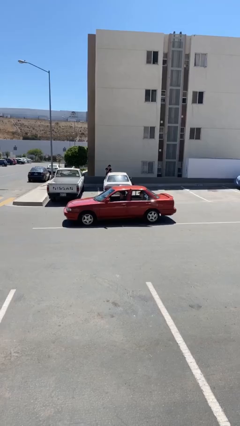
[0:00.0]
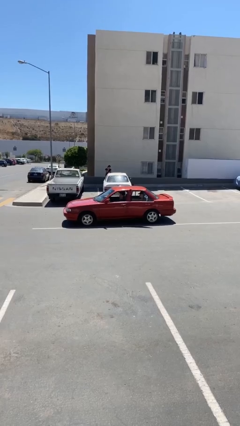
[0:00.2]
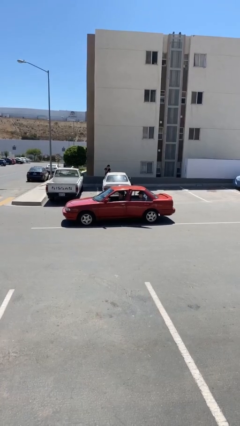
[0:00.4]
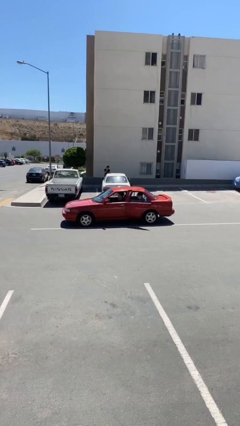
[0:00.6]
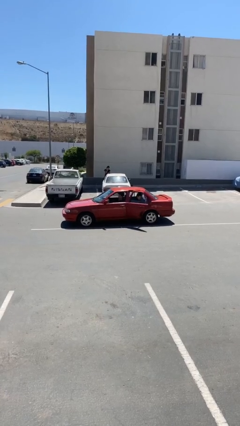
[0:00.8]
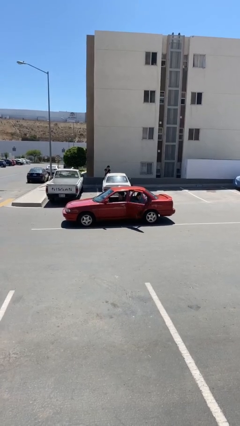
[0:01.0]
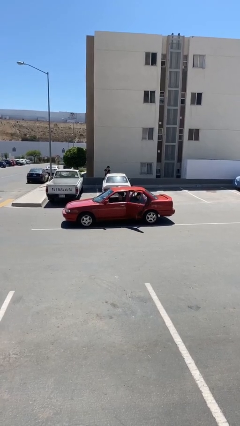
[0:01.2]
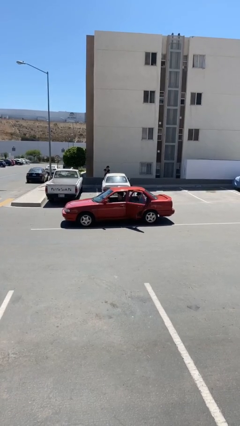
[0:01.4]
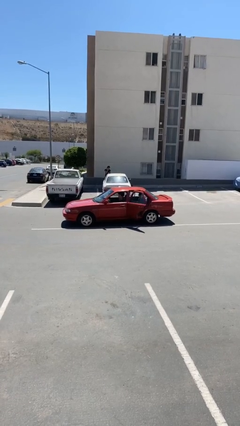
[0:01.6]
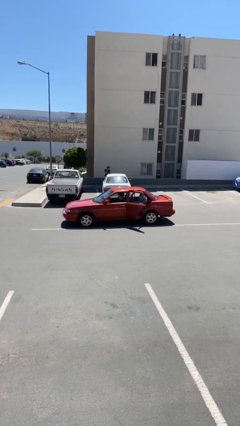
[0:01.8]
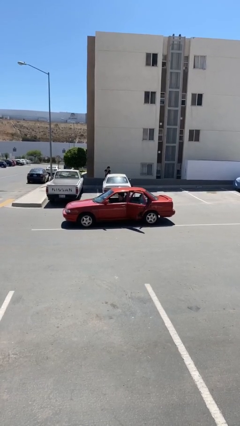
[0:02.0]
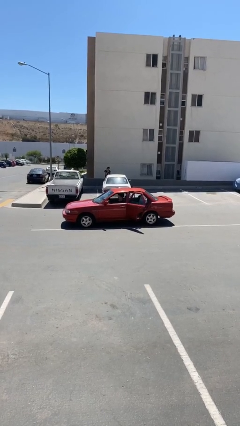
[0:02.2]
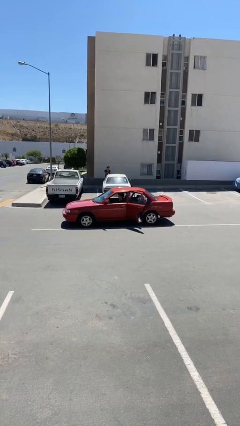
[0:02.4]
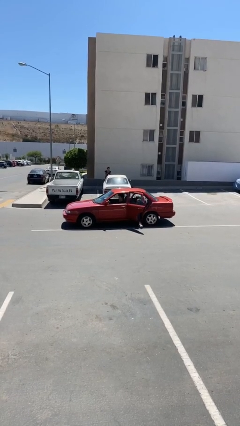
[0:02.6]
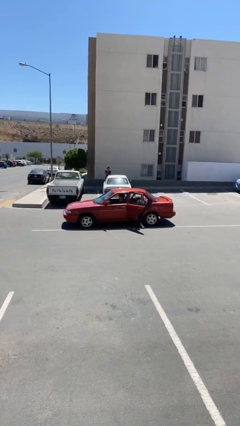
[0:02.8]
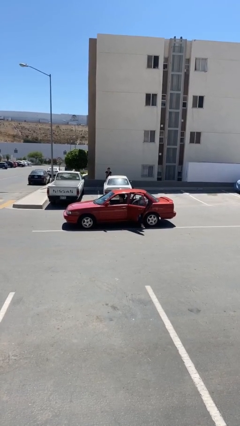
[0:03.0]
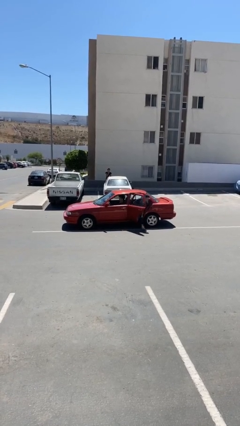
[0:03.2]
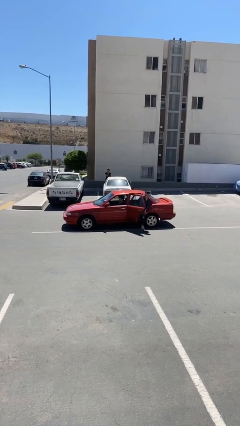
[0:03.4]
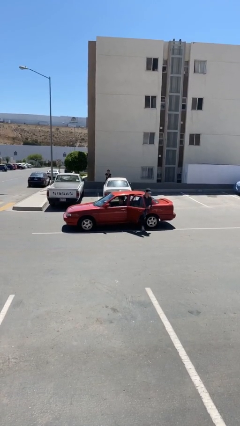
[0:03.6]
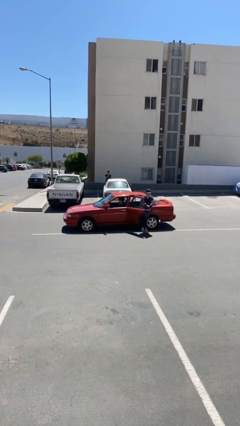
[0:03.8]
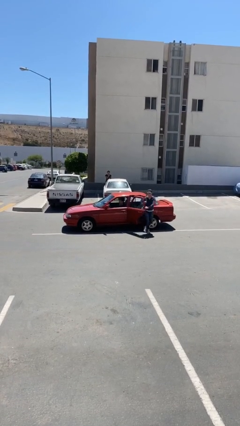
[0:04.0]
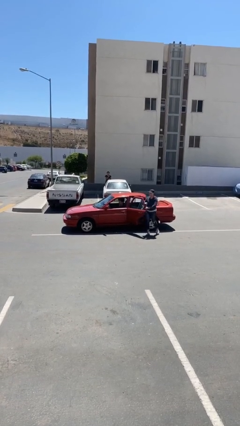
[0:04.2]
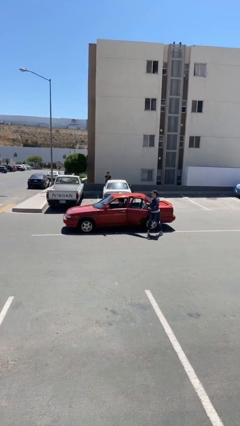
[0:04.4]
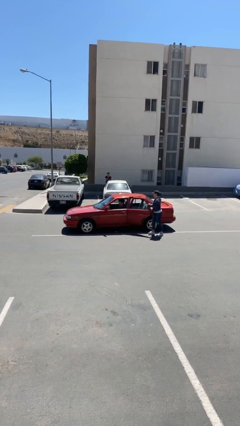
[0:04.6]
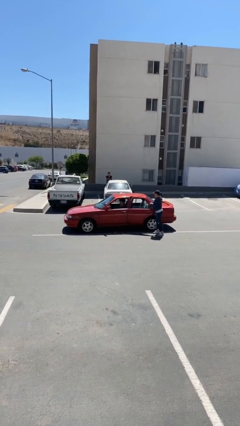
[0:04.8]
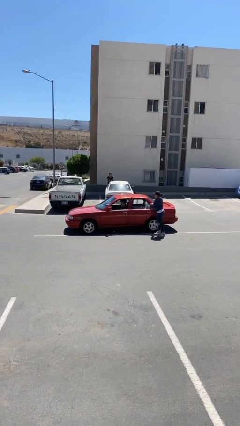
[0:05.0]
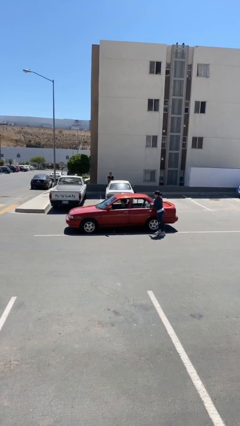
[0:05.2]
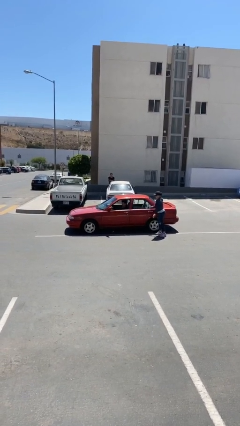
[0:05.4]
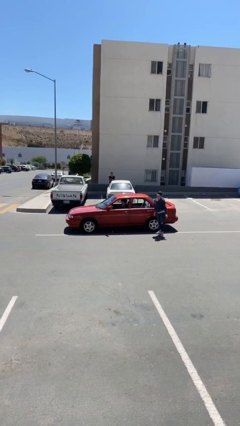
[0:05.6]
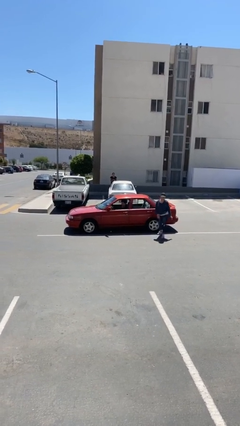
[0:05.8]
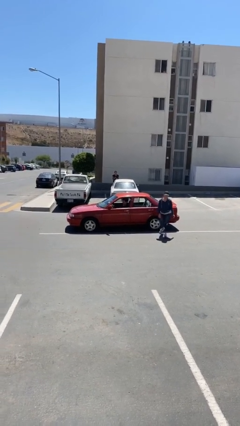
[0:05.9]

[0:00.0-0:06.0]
car drops off person

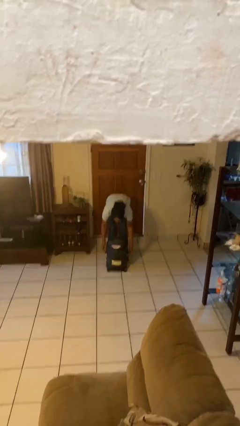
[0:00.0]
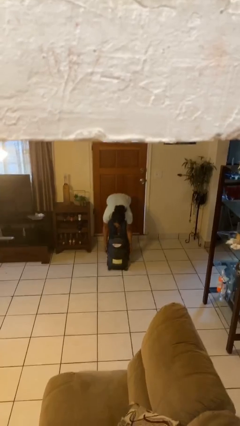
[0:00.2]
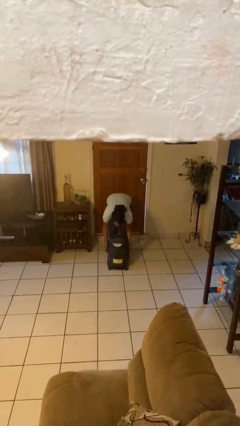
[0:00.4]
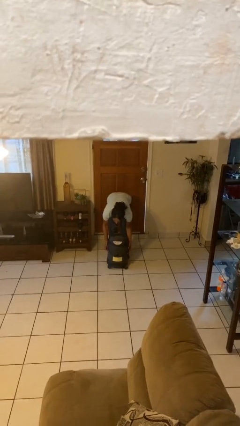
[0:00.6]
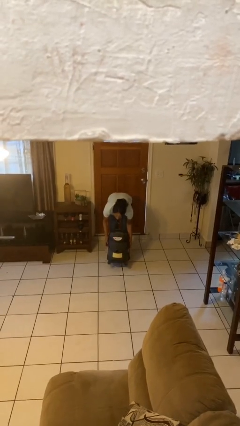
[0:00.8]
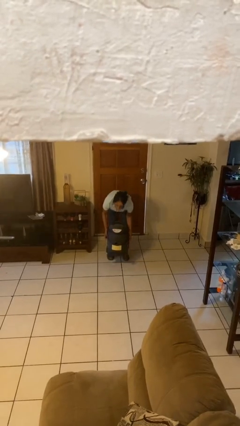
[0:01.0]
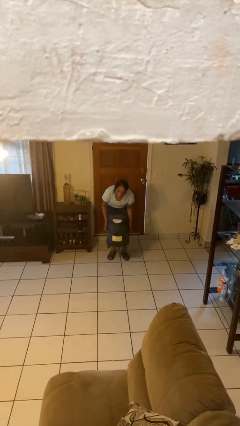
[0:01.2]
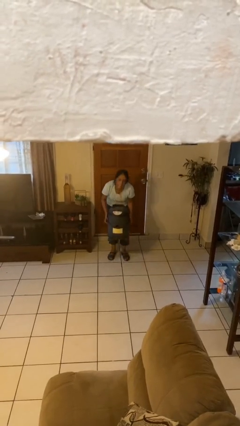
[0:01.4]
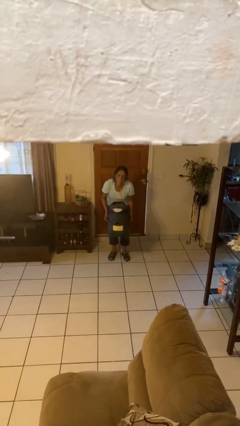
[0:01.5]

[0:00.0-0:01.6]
person picks up object from floor

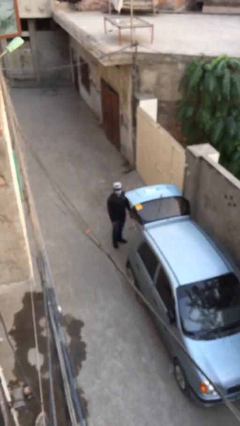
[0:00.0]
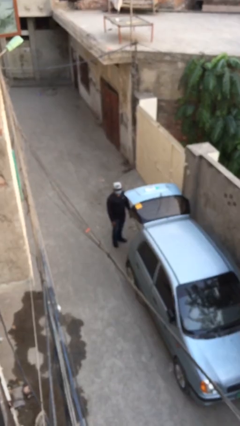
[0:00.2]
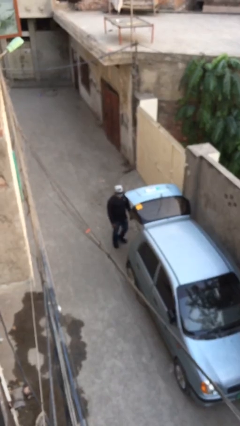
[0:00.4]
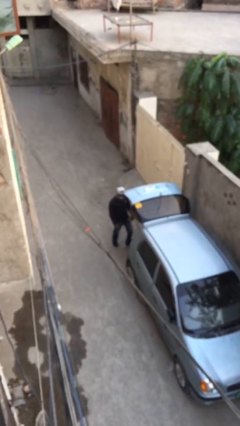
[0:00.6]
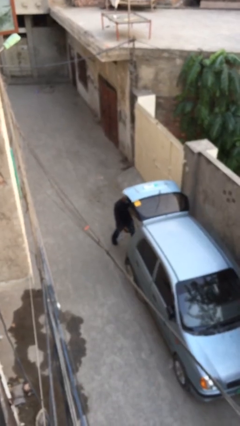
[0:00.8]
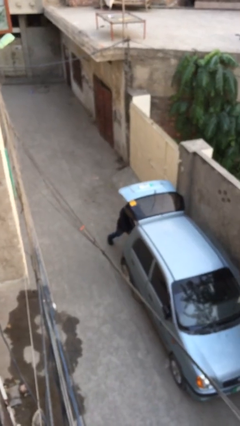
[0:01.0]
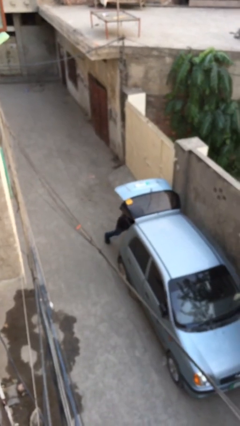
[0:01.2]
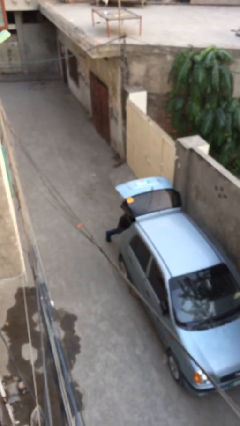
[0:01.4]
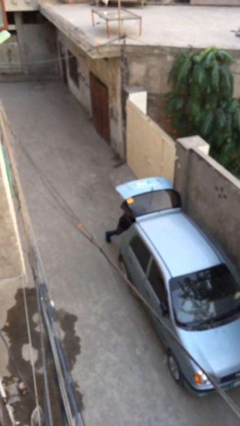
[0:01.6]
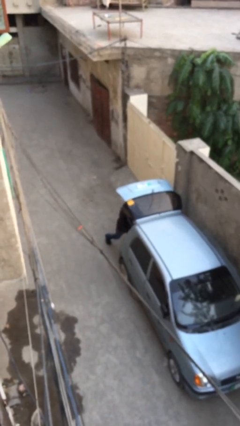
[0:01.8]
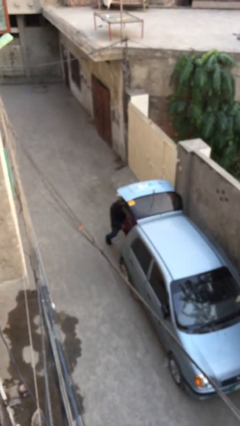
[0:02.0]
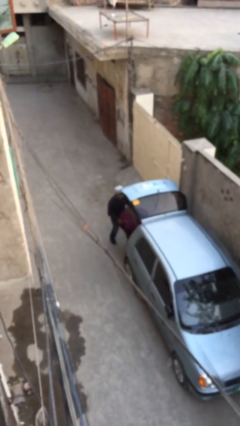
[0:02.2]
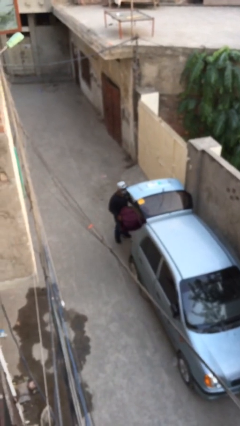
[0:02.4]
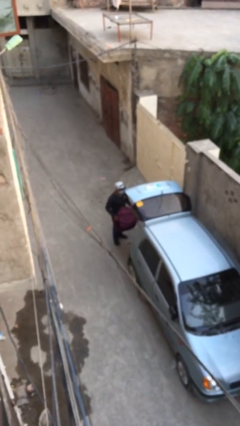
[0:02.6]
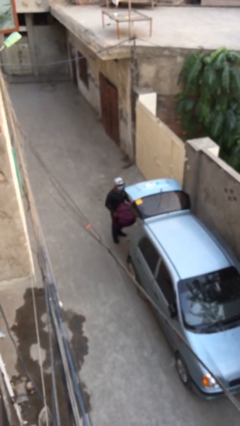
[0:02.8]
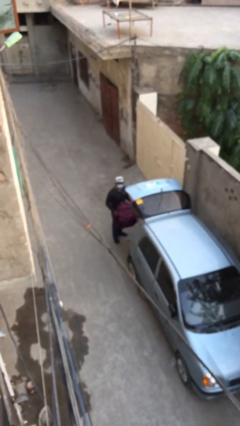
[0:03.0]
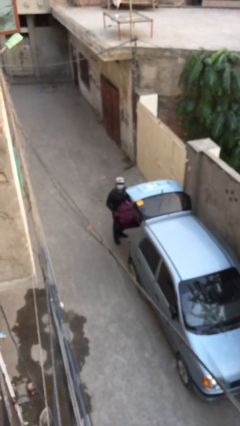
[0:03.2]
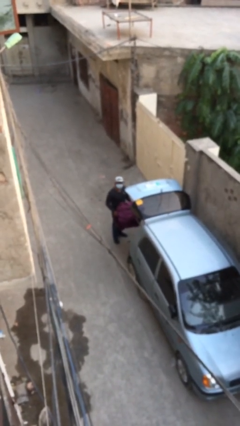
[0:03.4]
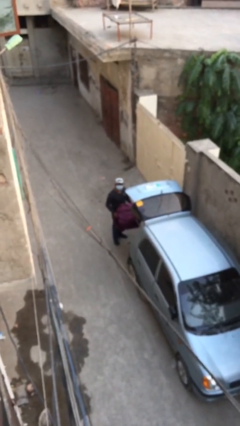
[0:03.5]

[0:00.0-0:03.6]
person unloads car

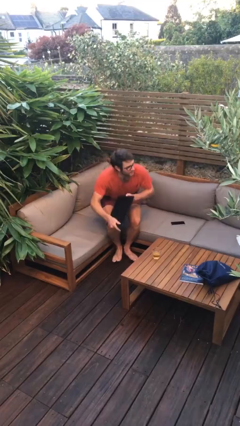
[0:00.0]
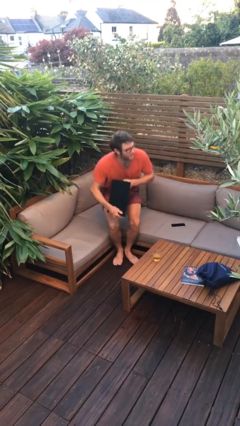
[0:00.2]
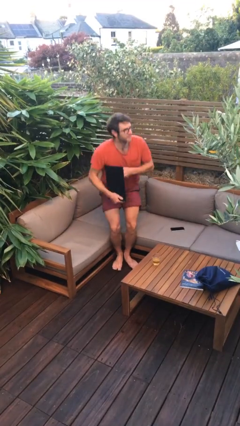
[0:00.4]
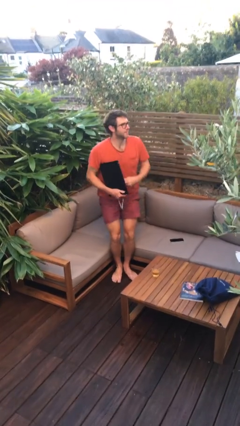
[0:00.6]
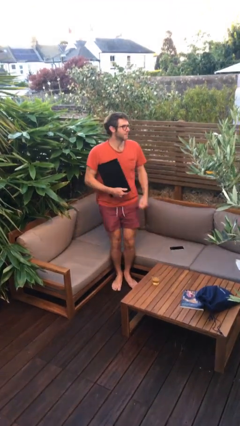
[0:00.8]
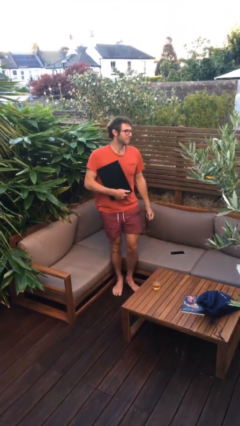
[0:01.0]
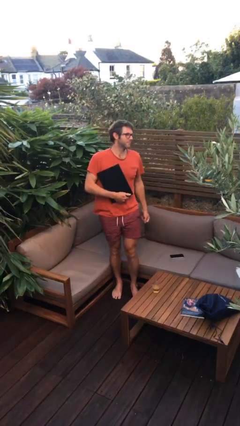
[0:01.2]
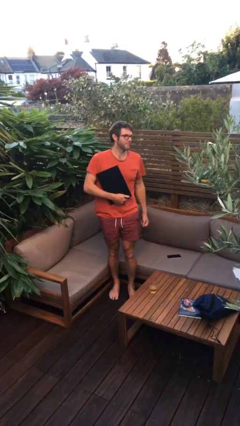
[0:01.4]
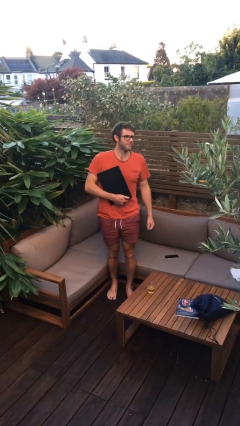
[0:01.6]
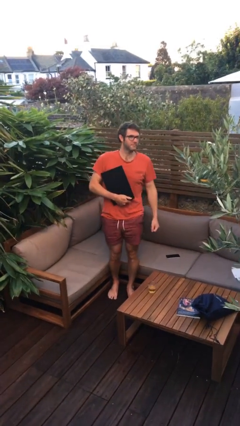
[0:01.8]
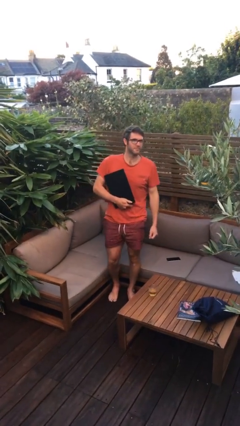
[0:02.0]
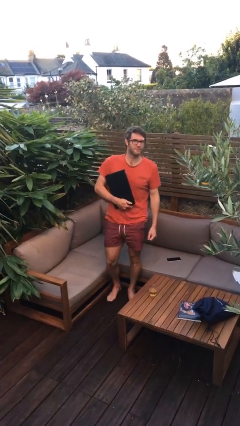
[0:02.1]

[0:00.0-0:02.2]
person stands up

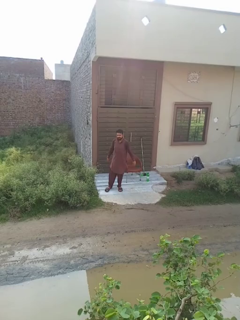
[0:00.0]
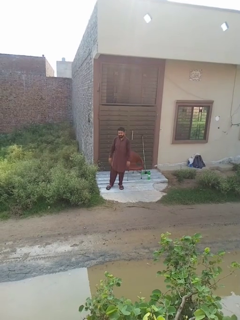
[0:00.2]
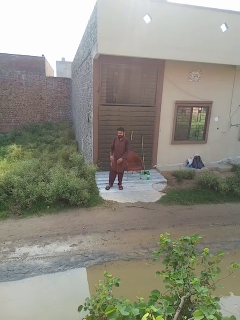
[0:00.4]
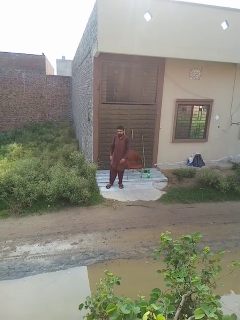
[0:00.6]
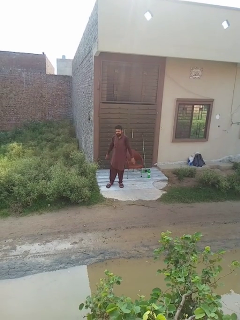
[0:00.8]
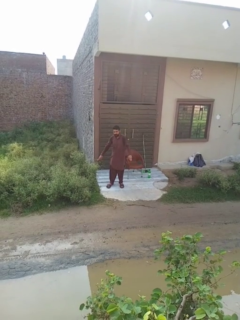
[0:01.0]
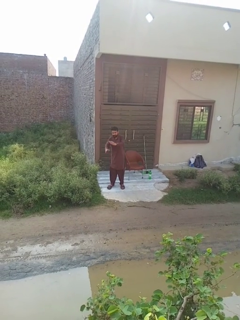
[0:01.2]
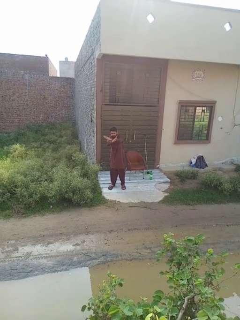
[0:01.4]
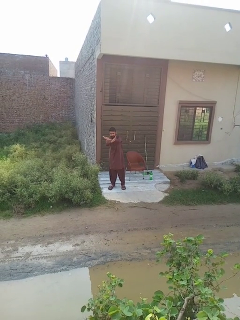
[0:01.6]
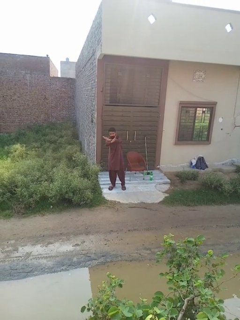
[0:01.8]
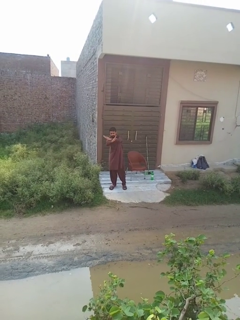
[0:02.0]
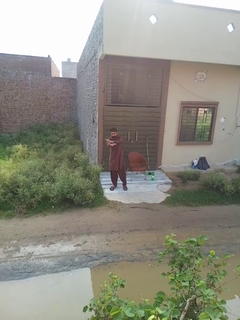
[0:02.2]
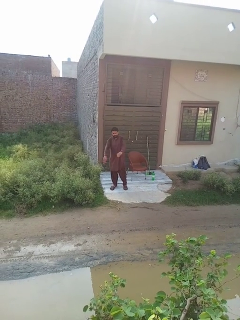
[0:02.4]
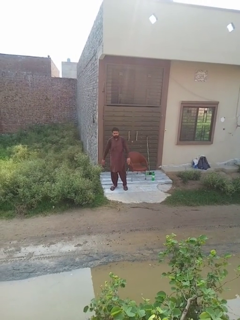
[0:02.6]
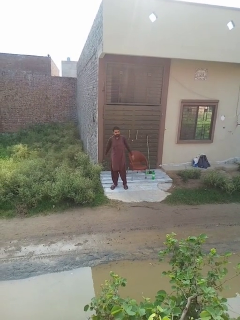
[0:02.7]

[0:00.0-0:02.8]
person crosses arms

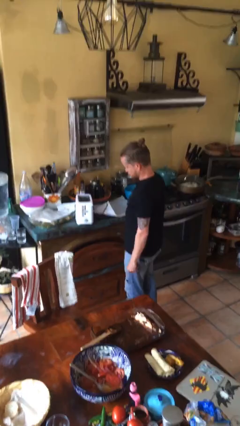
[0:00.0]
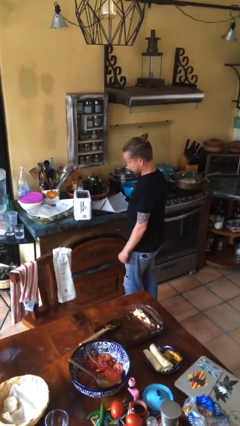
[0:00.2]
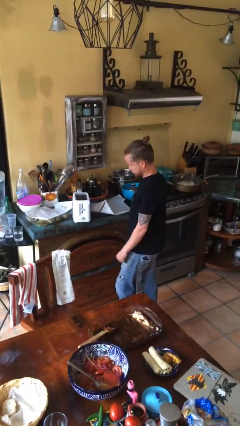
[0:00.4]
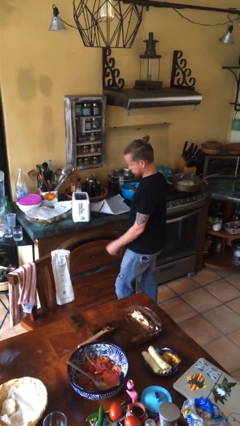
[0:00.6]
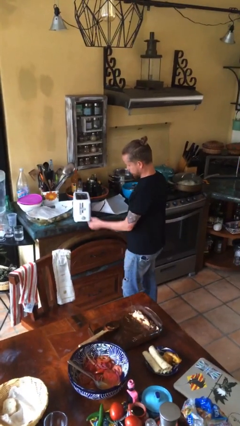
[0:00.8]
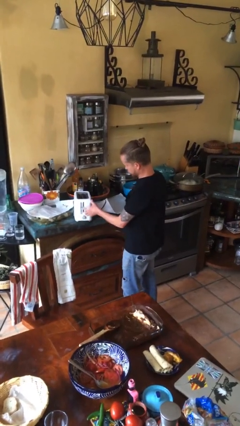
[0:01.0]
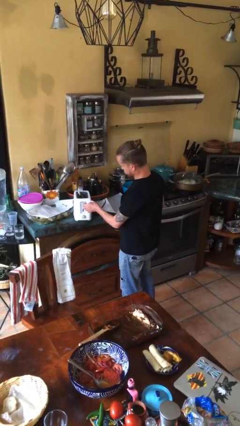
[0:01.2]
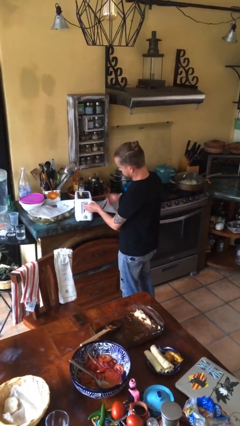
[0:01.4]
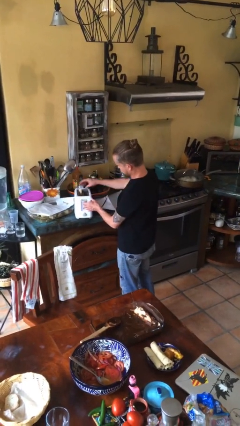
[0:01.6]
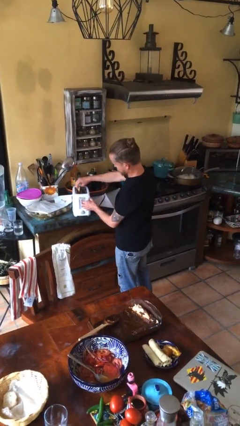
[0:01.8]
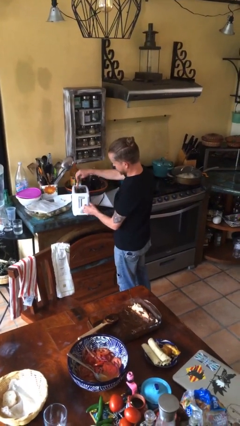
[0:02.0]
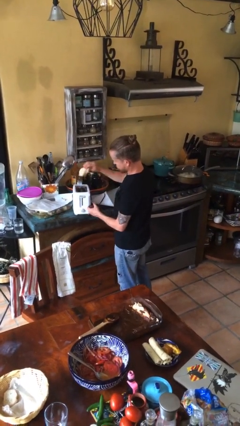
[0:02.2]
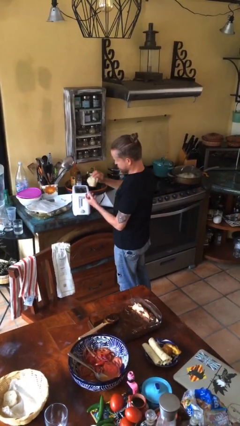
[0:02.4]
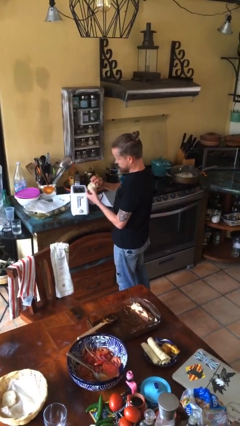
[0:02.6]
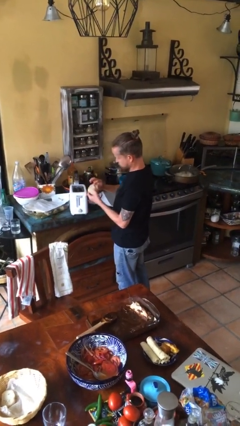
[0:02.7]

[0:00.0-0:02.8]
person takes object from toaster
